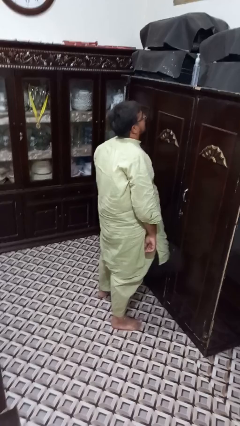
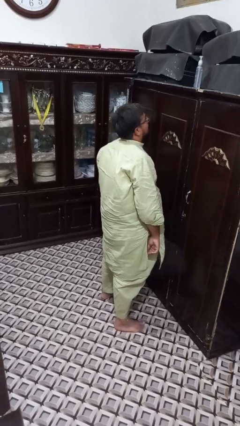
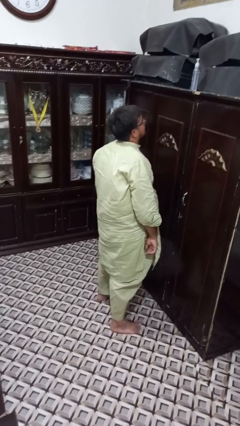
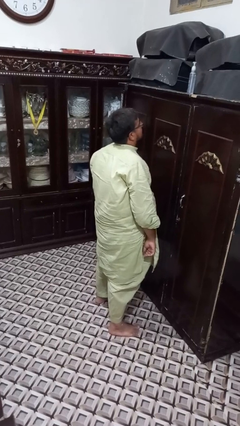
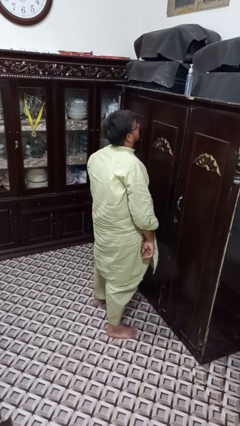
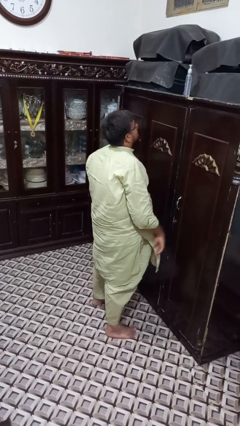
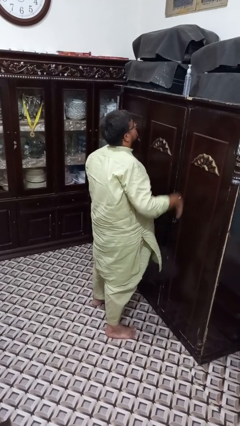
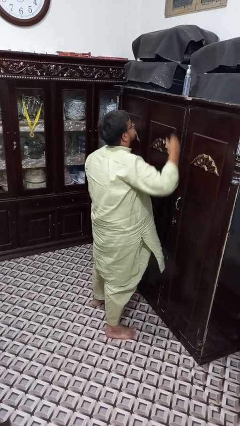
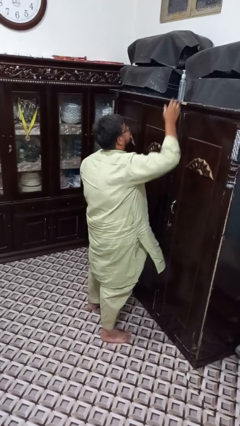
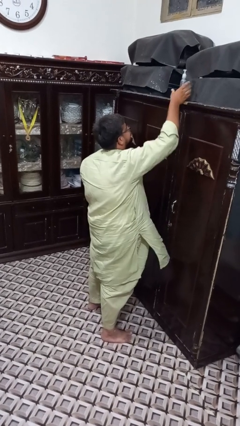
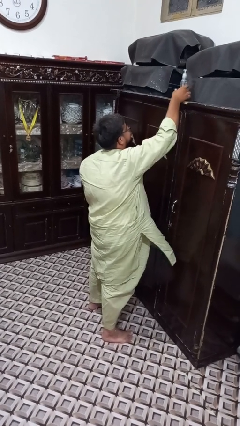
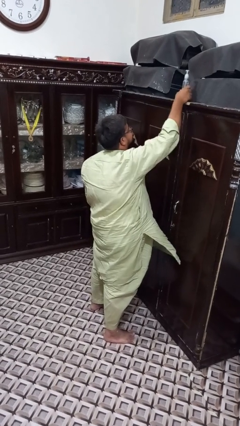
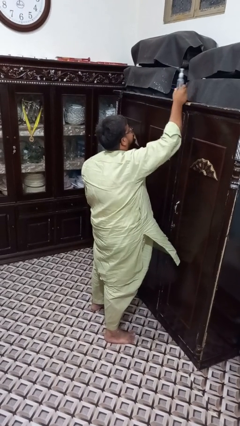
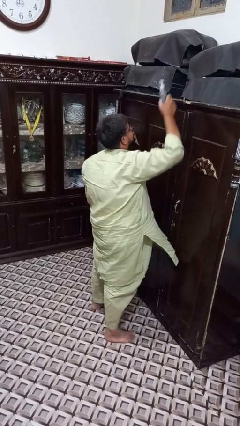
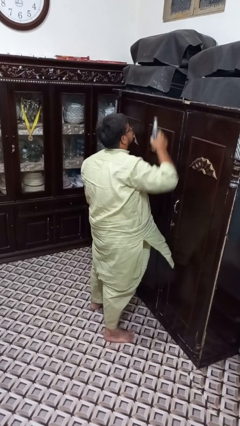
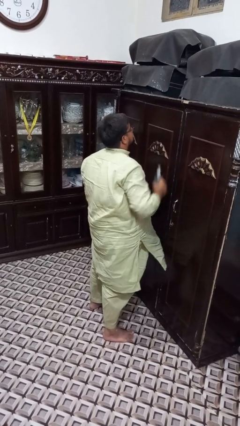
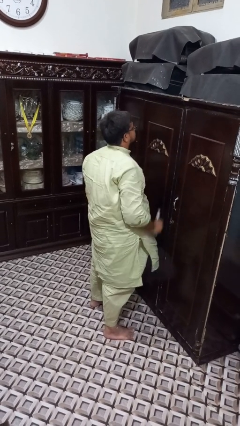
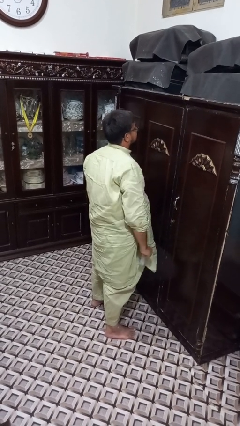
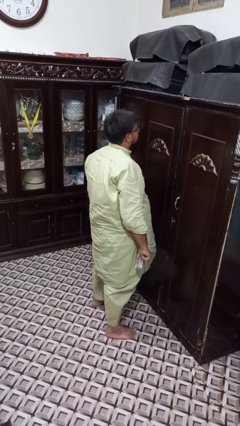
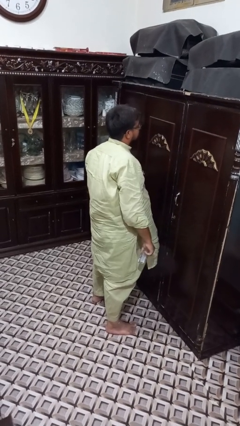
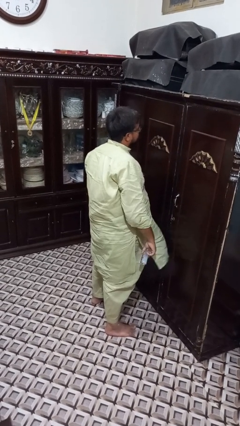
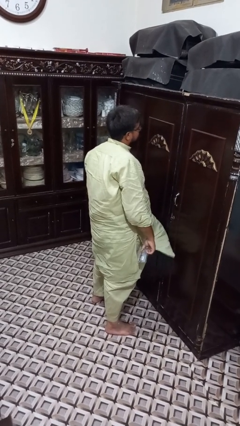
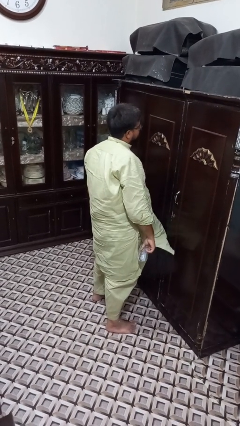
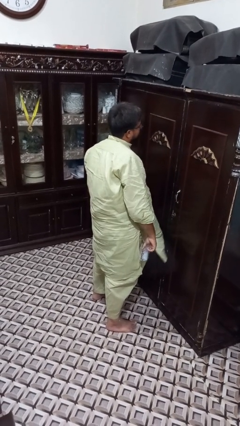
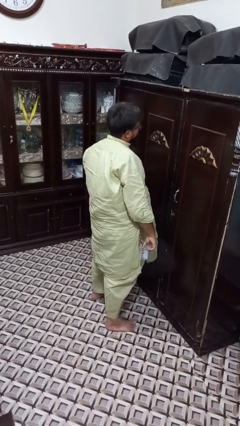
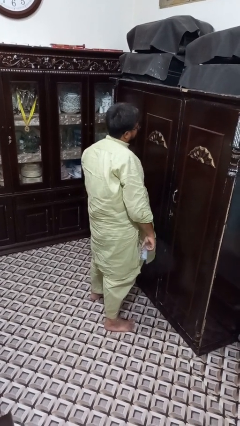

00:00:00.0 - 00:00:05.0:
person picks up object from shelf

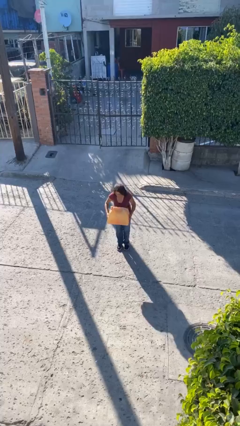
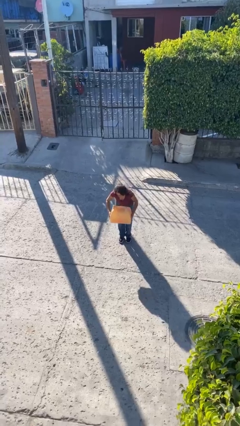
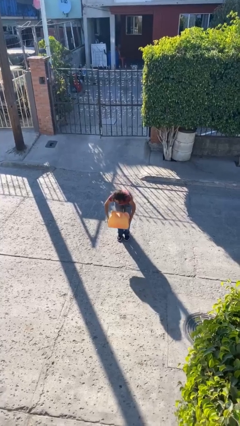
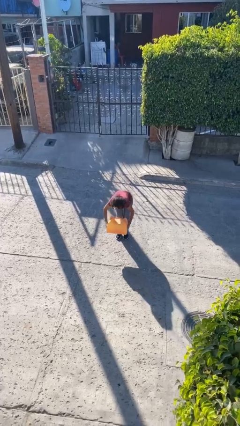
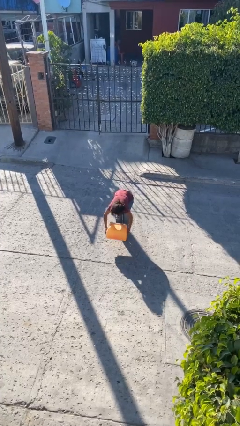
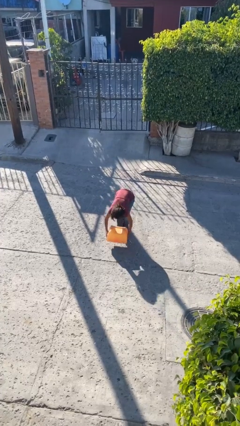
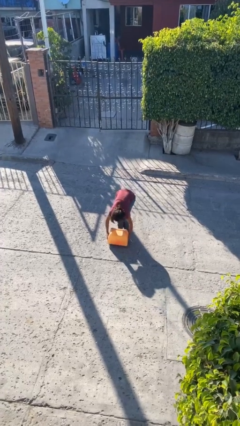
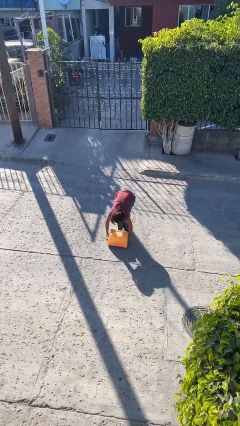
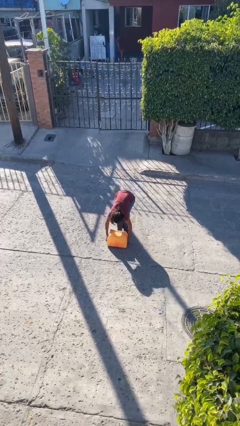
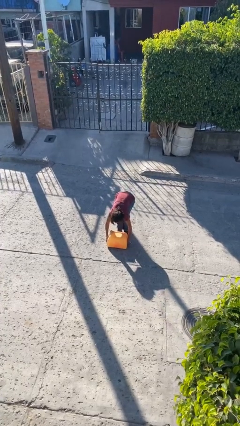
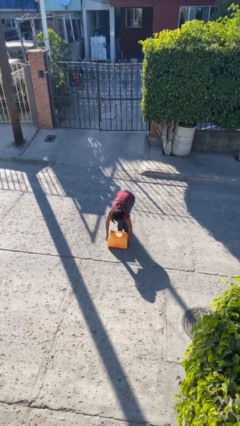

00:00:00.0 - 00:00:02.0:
person puts down object on floor

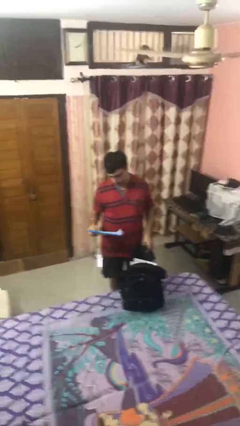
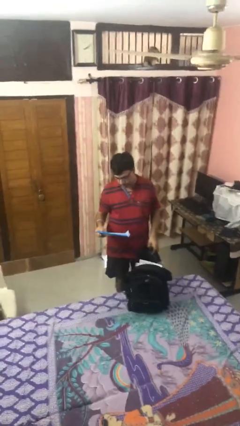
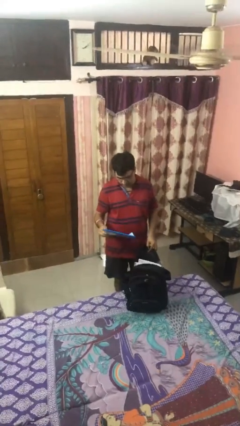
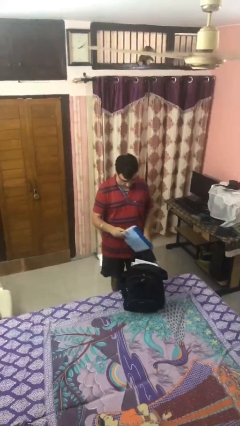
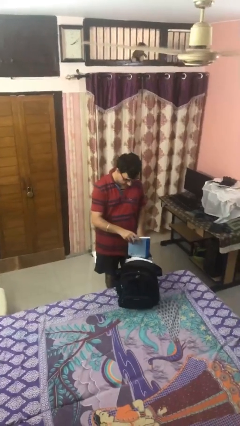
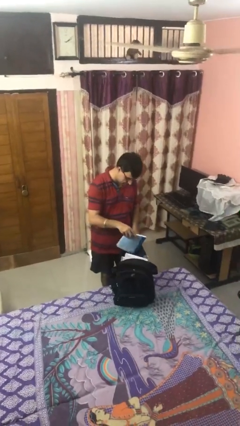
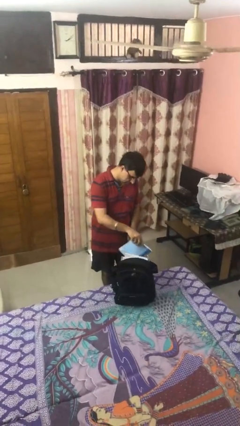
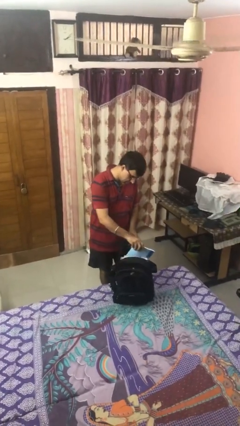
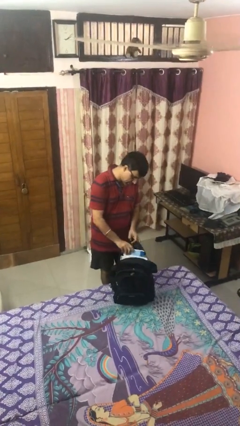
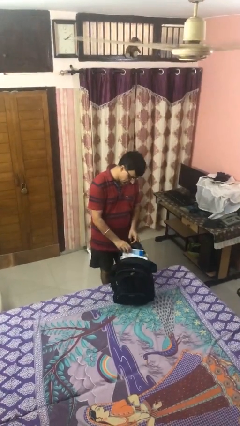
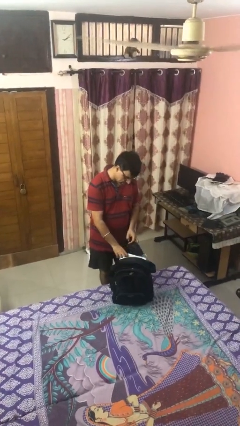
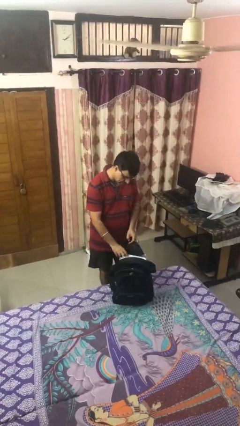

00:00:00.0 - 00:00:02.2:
person puts object into backpack

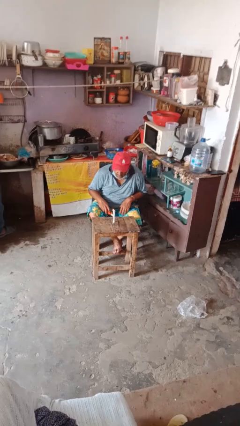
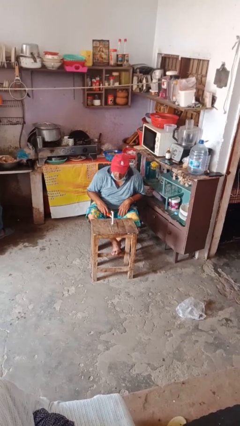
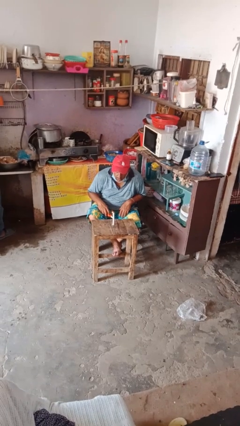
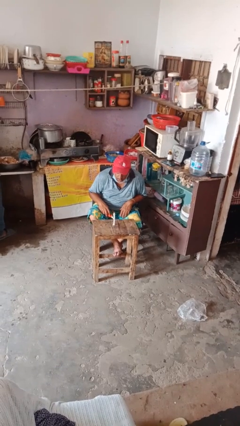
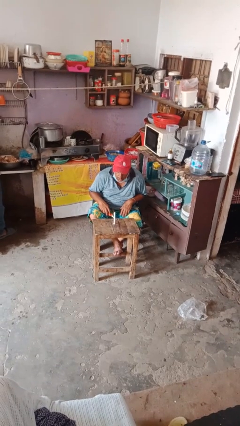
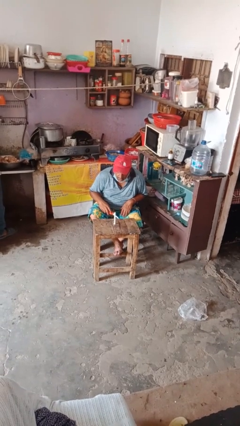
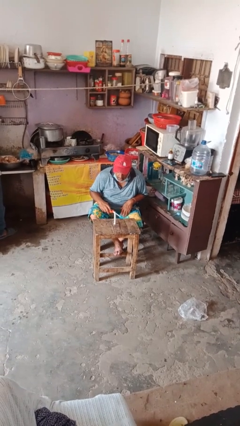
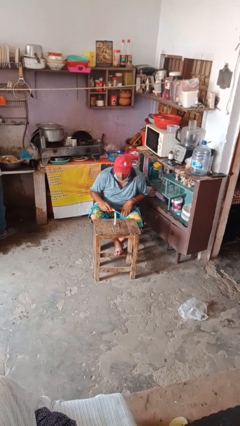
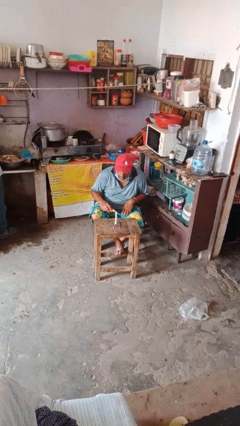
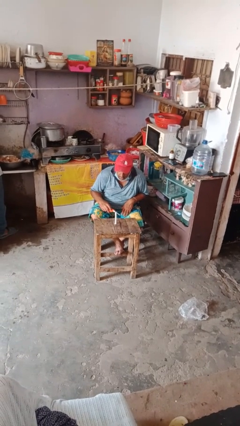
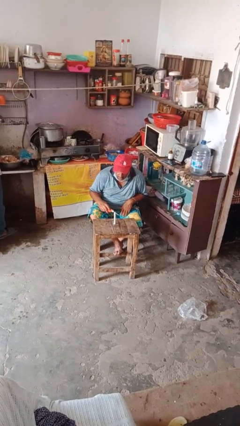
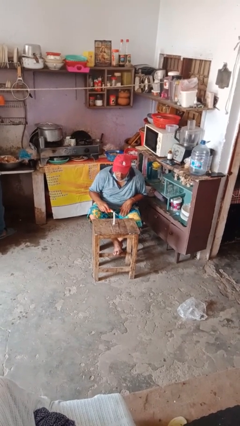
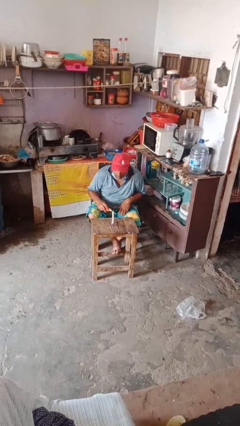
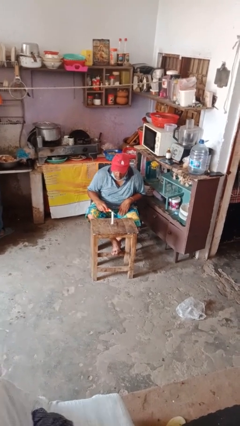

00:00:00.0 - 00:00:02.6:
person extinguishes candle

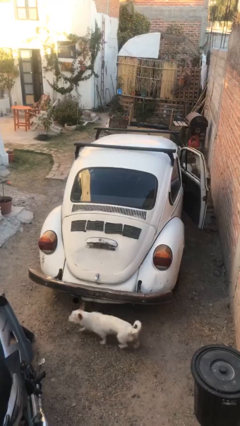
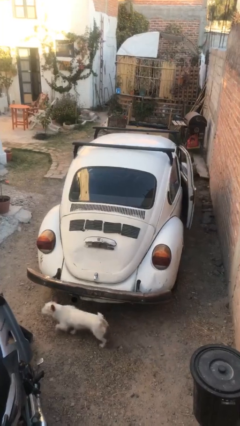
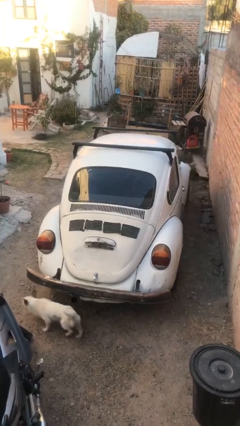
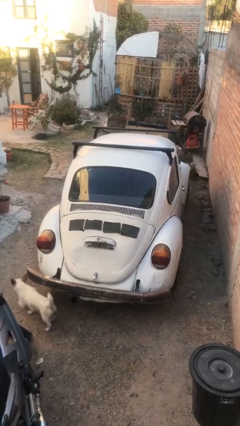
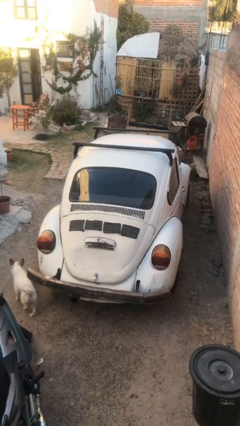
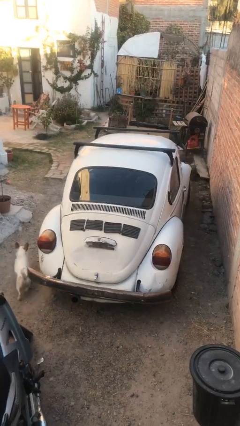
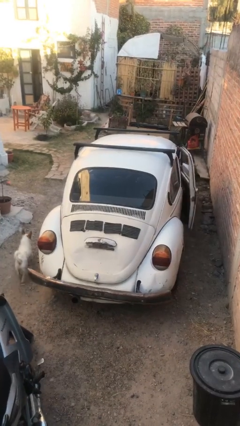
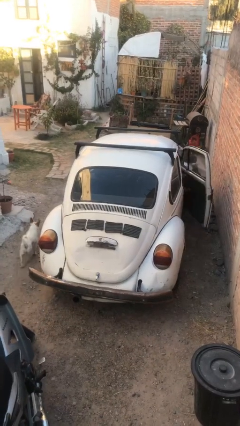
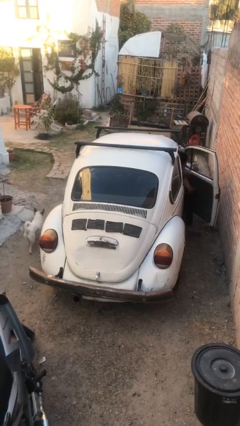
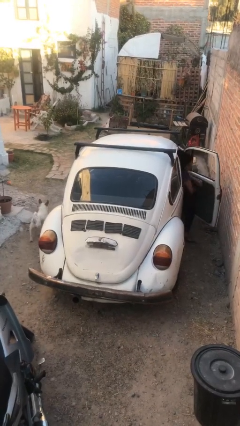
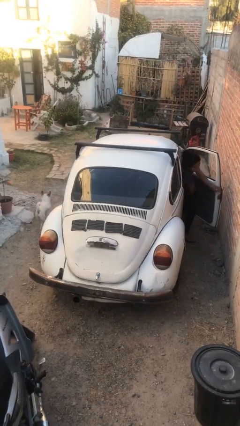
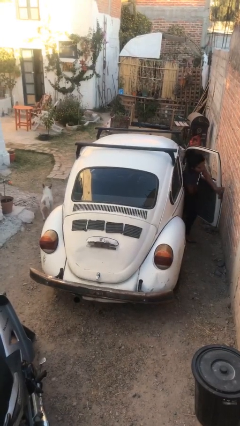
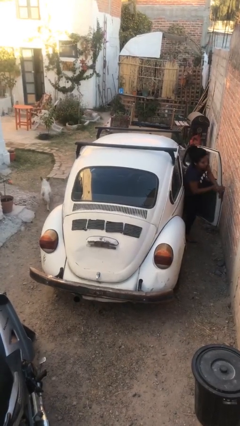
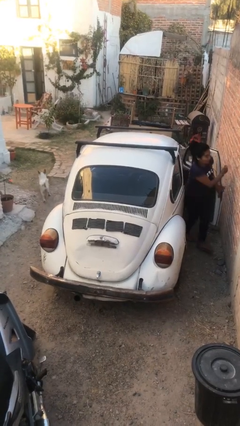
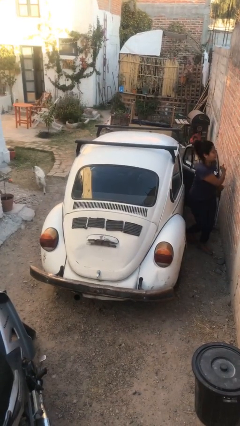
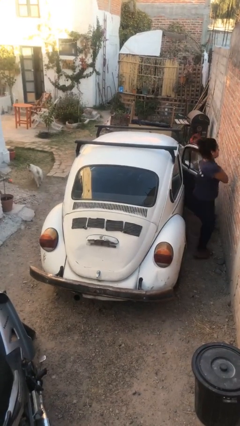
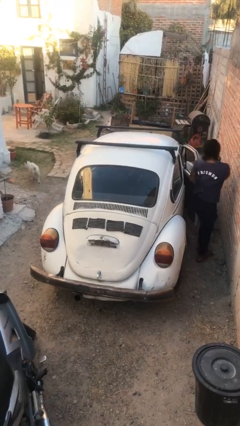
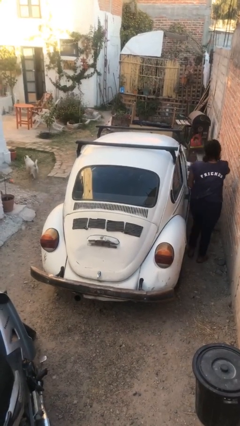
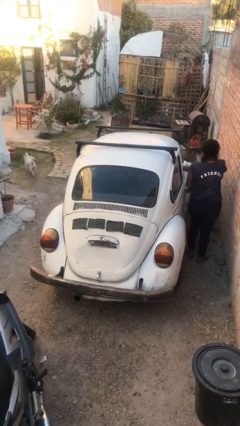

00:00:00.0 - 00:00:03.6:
car drops off person

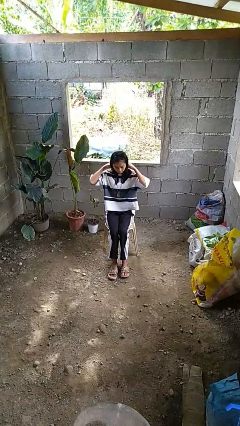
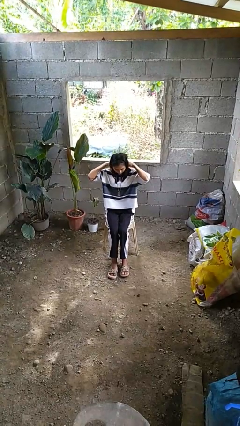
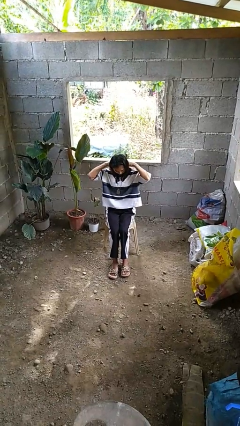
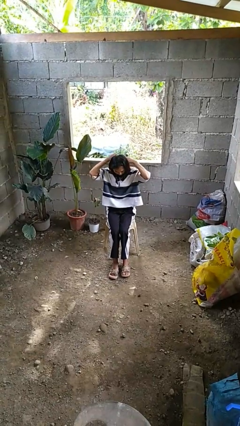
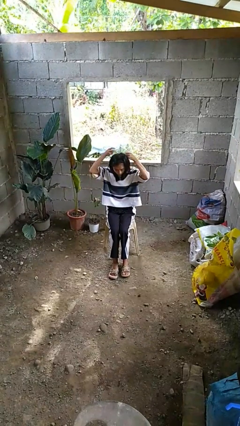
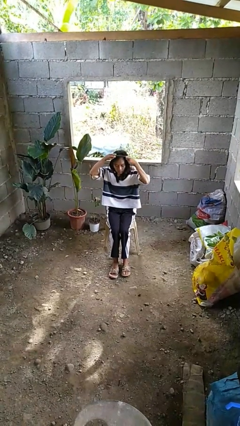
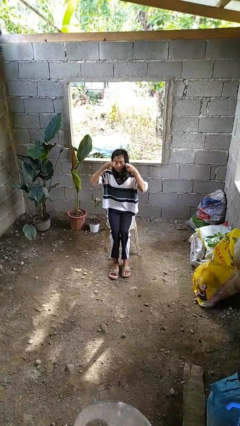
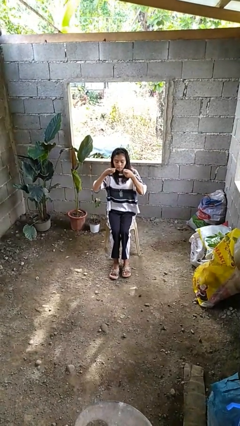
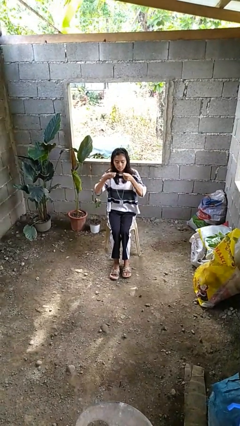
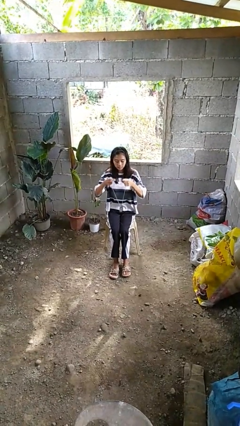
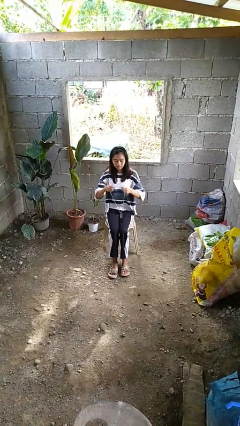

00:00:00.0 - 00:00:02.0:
person takes off necklace
